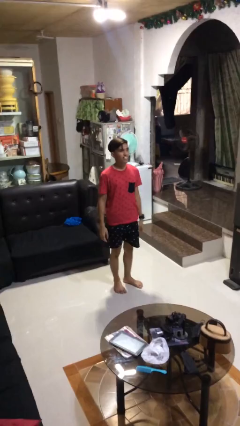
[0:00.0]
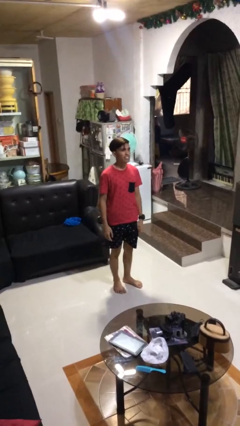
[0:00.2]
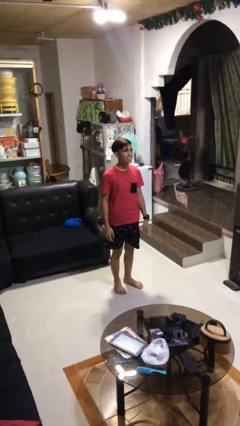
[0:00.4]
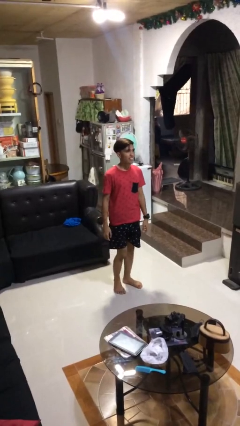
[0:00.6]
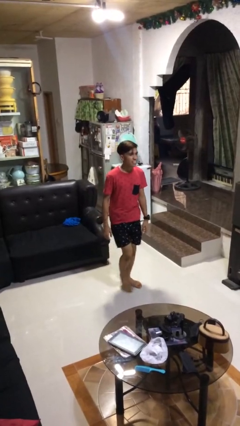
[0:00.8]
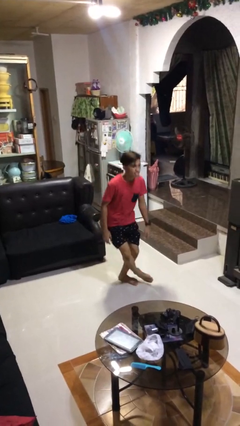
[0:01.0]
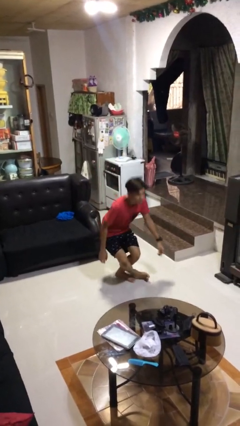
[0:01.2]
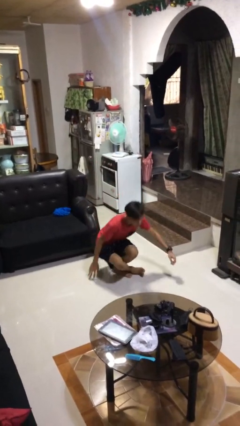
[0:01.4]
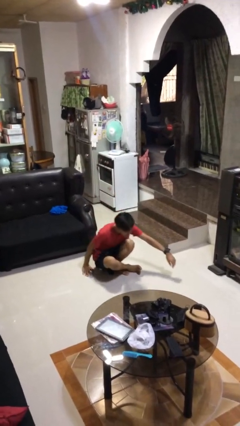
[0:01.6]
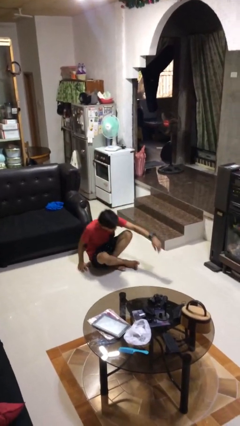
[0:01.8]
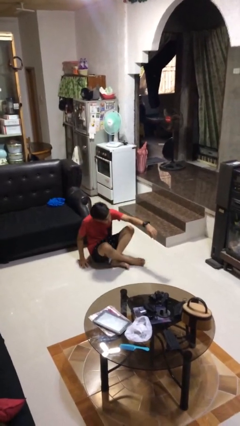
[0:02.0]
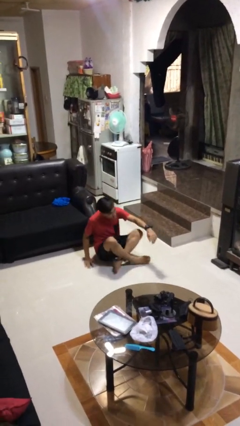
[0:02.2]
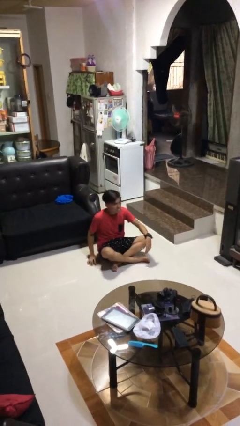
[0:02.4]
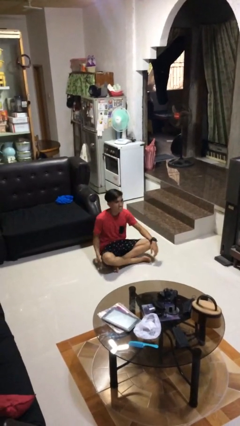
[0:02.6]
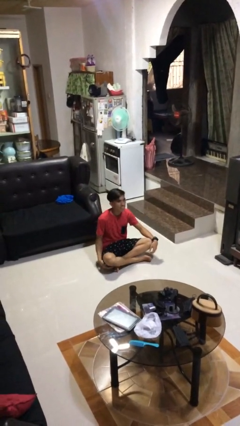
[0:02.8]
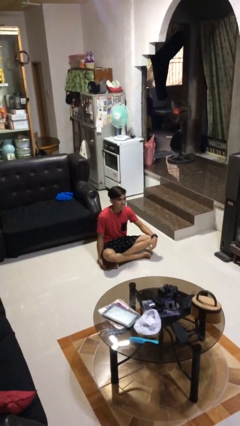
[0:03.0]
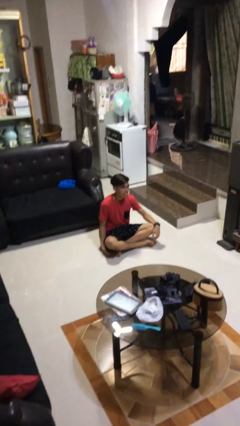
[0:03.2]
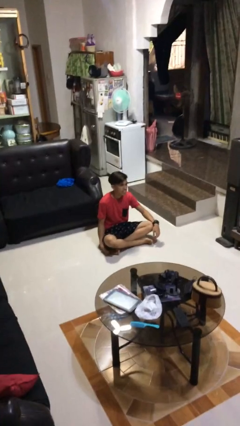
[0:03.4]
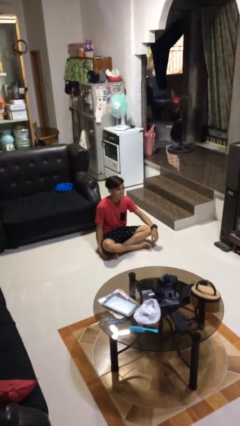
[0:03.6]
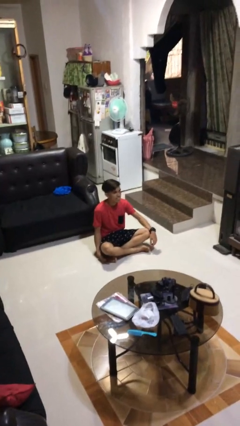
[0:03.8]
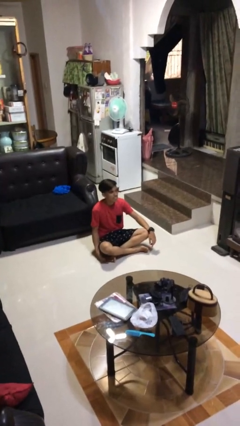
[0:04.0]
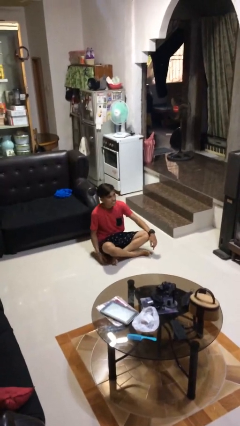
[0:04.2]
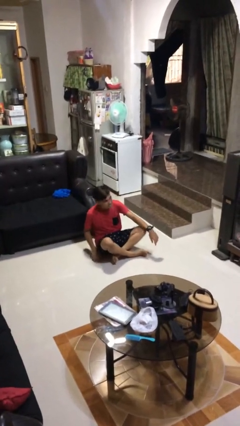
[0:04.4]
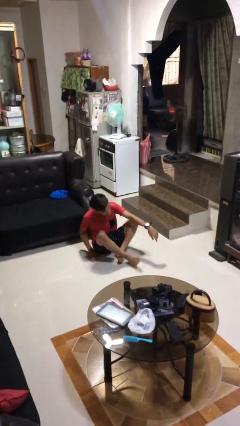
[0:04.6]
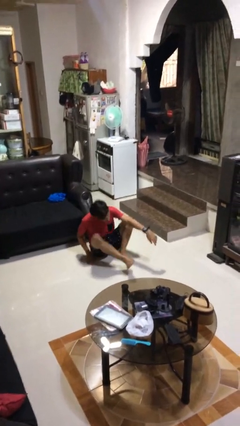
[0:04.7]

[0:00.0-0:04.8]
person sits crisscross

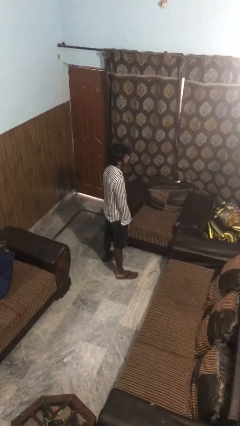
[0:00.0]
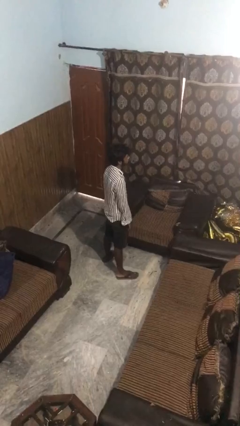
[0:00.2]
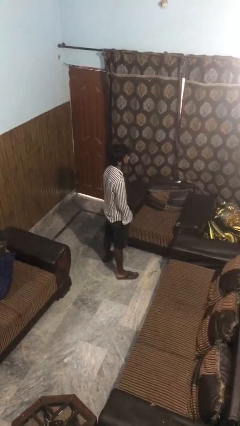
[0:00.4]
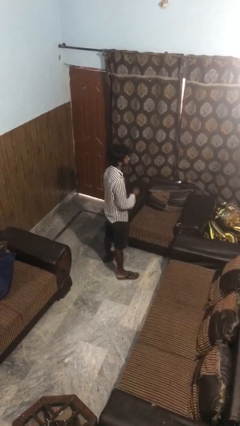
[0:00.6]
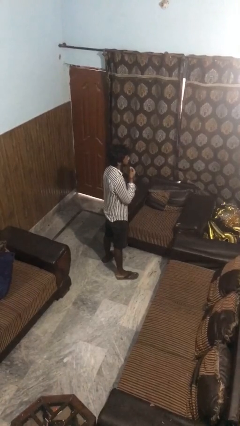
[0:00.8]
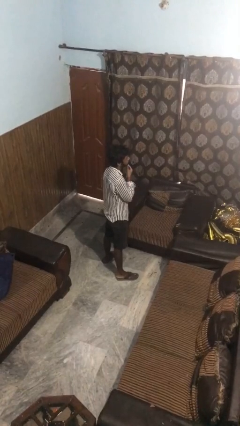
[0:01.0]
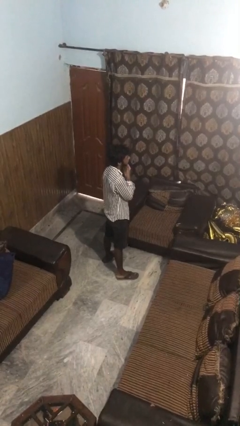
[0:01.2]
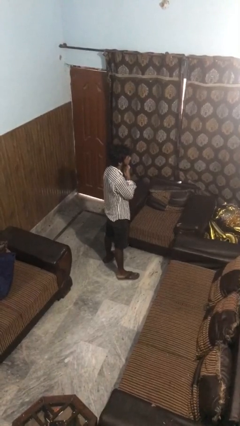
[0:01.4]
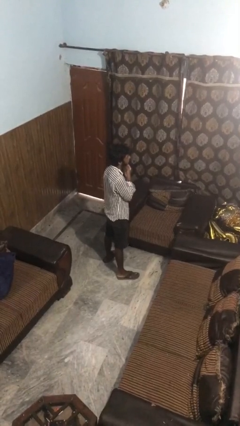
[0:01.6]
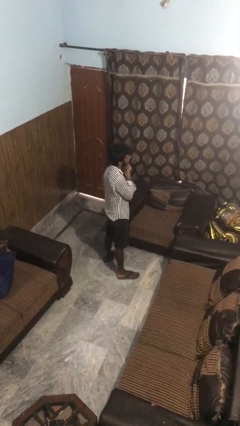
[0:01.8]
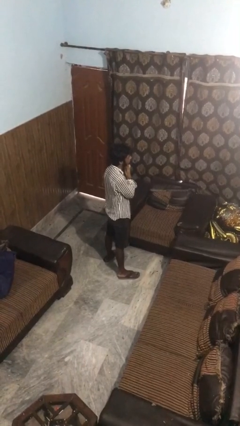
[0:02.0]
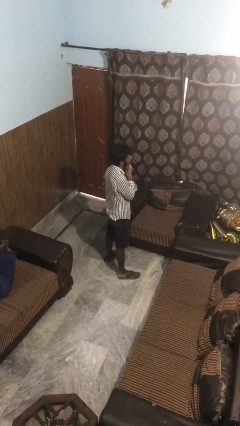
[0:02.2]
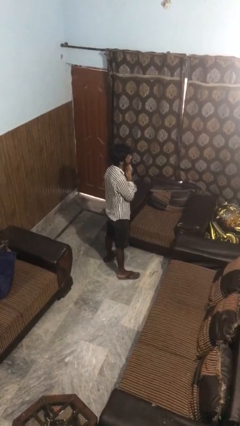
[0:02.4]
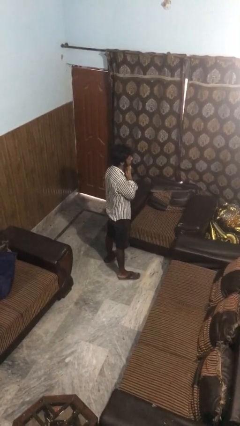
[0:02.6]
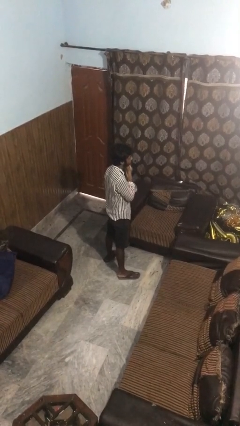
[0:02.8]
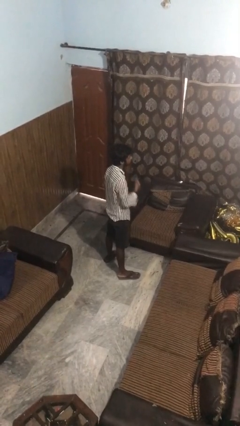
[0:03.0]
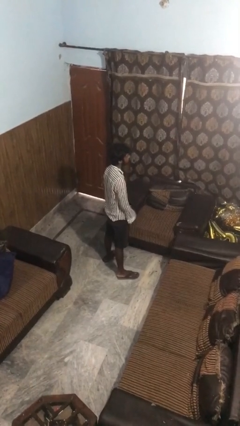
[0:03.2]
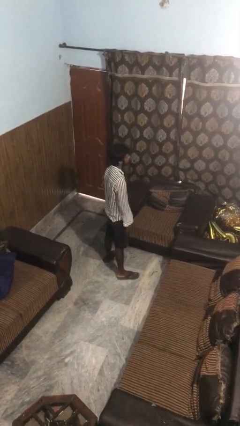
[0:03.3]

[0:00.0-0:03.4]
person strokes chin

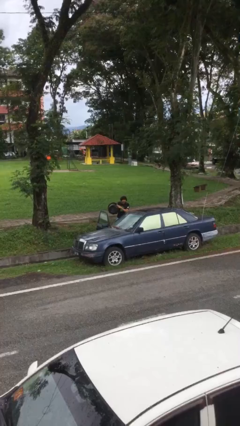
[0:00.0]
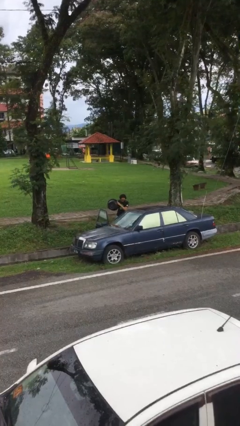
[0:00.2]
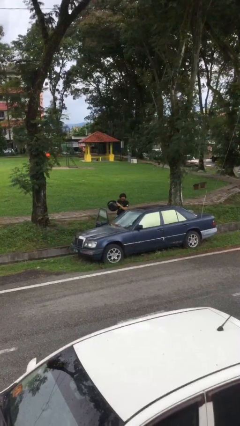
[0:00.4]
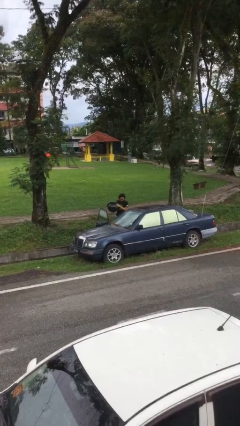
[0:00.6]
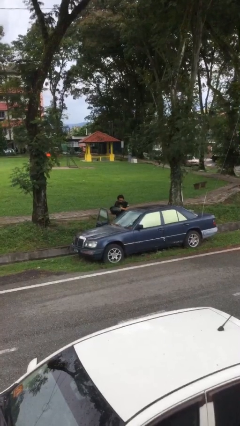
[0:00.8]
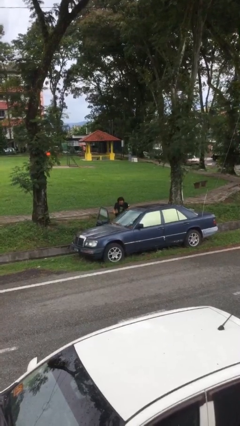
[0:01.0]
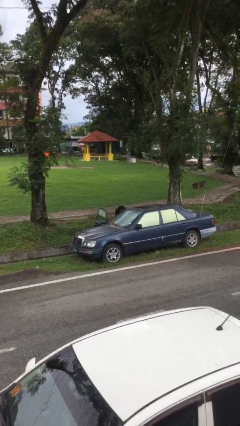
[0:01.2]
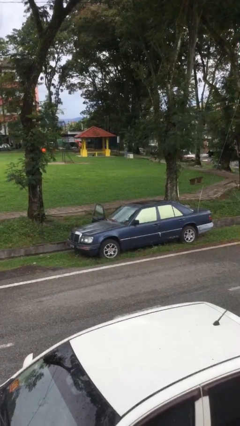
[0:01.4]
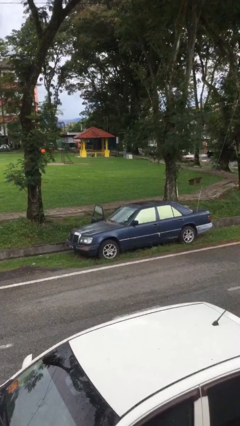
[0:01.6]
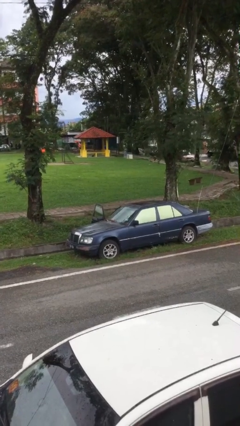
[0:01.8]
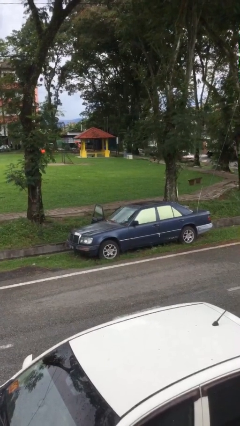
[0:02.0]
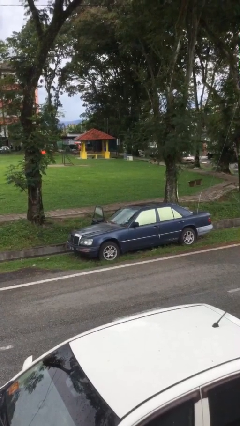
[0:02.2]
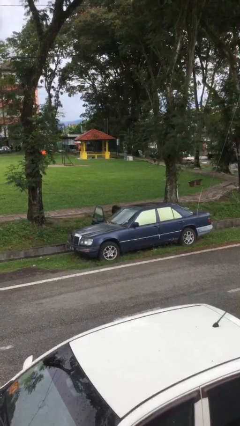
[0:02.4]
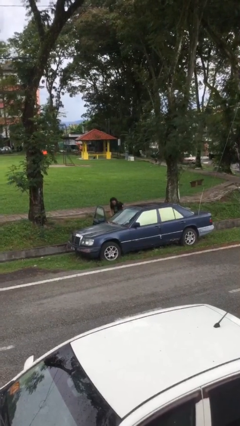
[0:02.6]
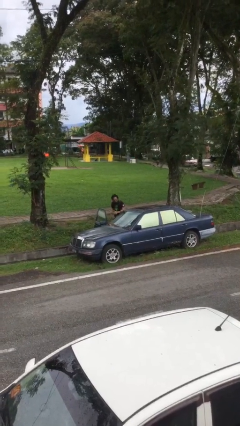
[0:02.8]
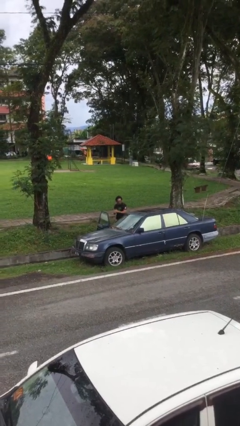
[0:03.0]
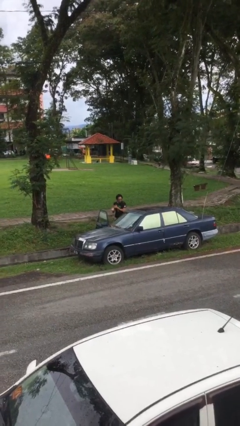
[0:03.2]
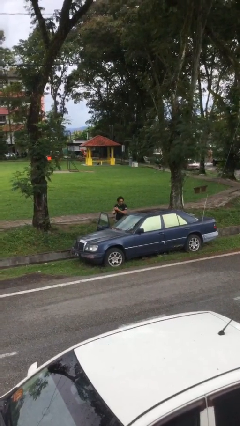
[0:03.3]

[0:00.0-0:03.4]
person loads car

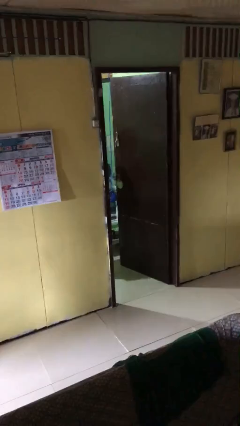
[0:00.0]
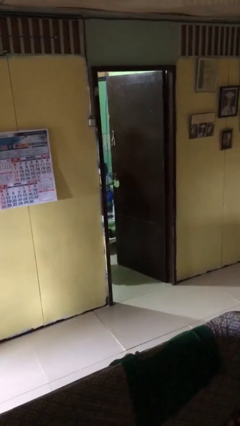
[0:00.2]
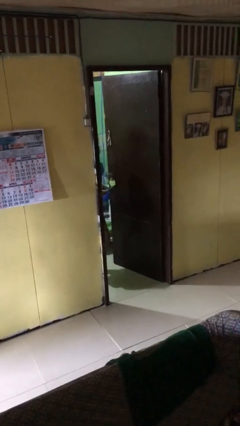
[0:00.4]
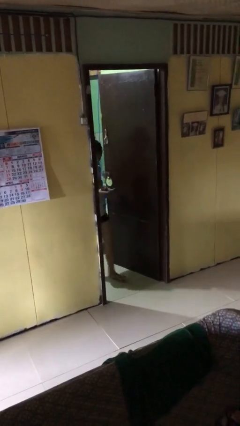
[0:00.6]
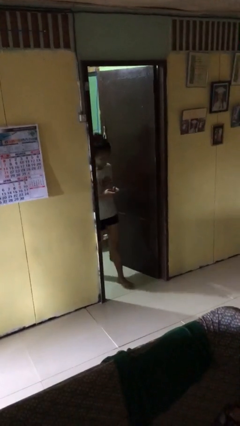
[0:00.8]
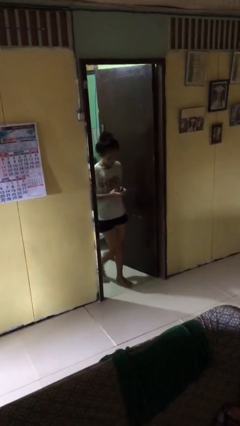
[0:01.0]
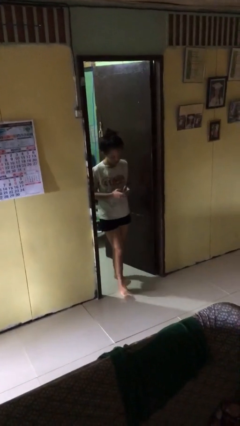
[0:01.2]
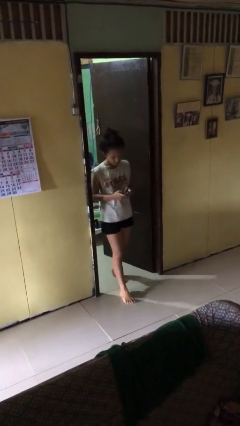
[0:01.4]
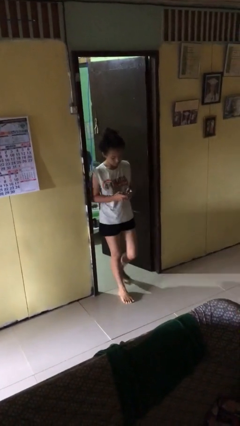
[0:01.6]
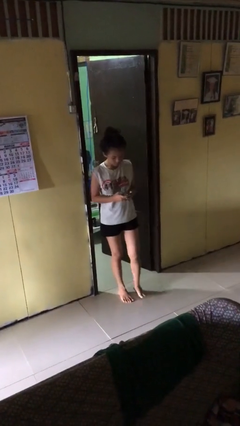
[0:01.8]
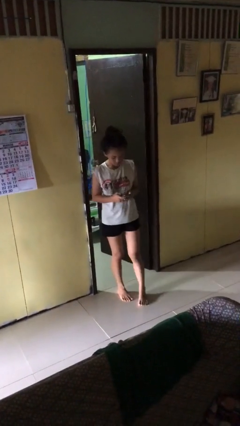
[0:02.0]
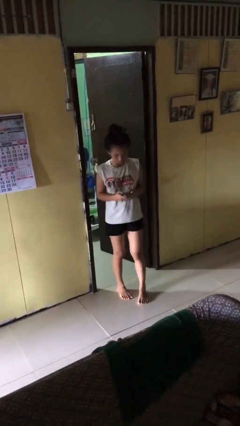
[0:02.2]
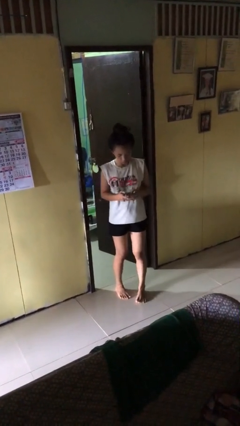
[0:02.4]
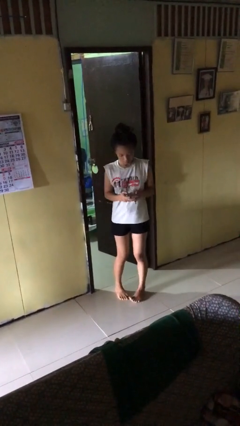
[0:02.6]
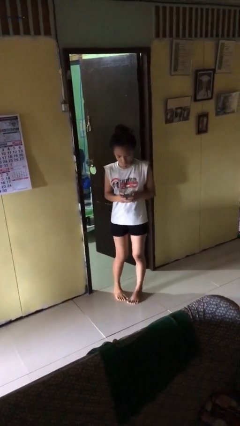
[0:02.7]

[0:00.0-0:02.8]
person enters scene through structure

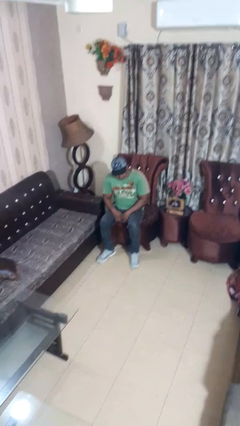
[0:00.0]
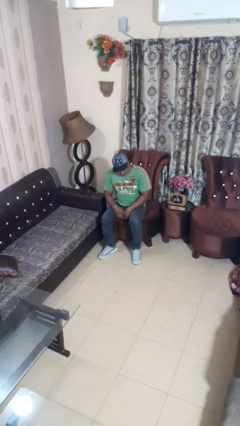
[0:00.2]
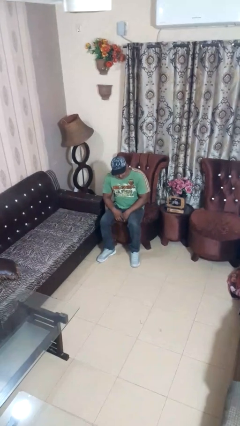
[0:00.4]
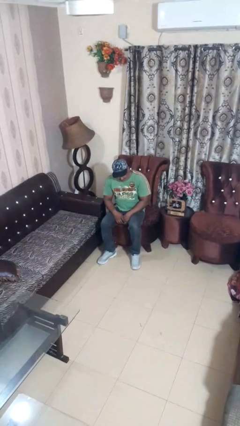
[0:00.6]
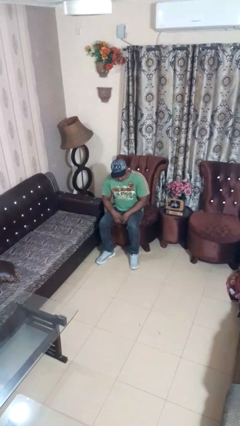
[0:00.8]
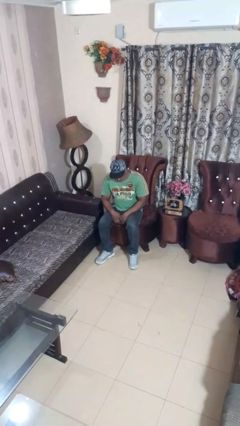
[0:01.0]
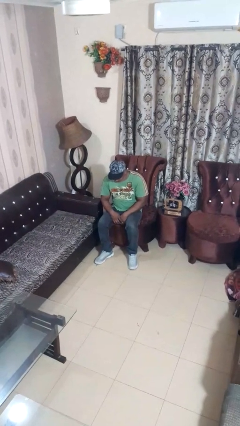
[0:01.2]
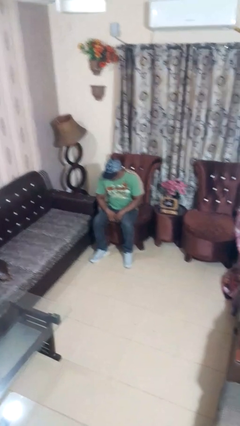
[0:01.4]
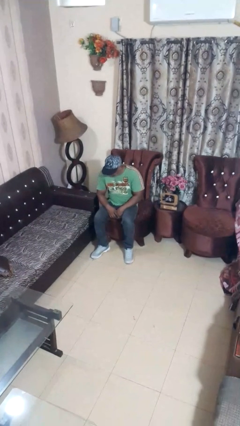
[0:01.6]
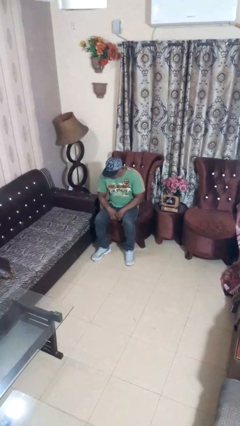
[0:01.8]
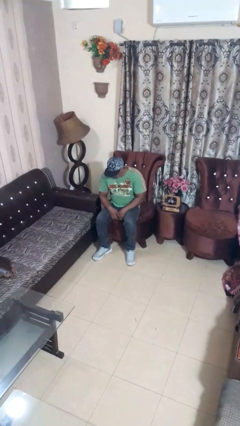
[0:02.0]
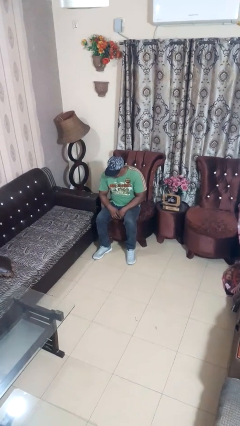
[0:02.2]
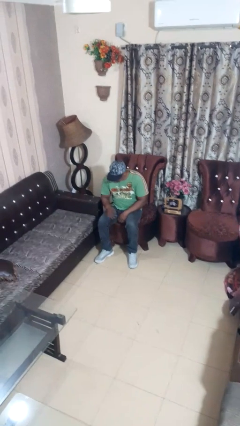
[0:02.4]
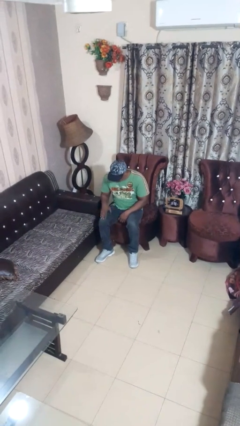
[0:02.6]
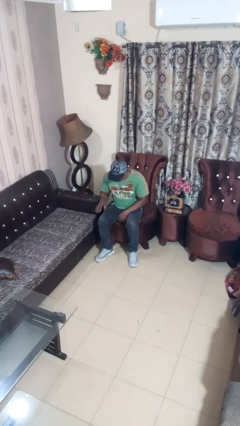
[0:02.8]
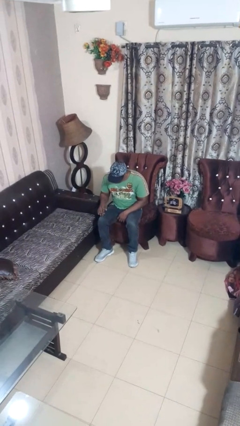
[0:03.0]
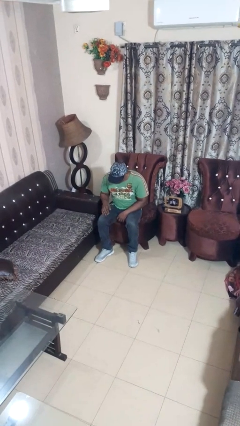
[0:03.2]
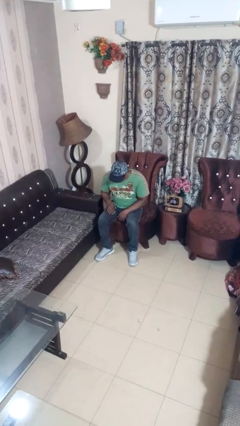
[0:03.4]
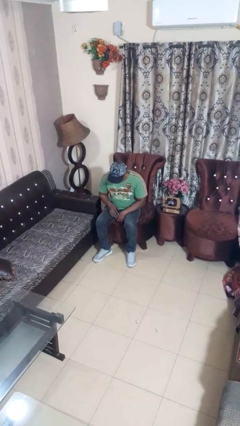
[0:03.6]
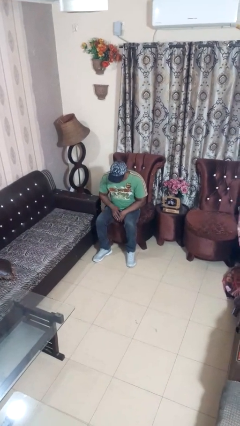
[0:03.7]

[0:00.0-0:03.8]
person swats bug
